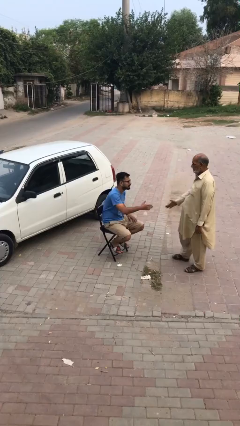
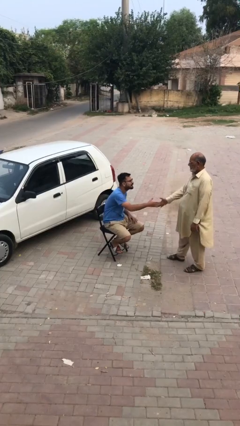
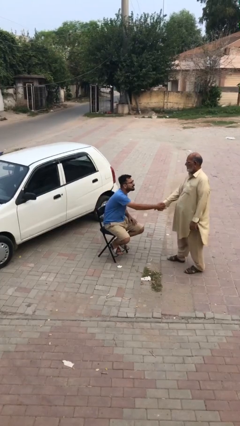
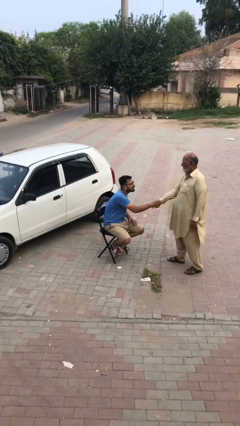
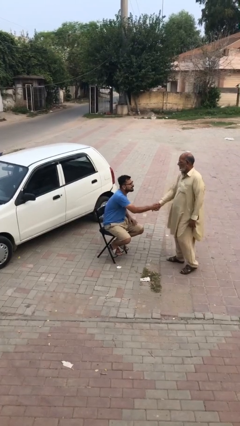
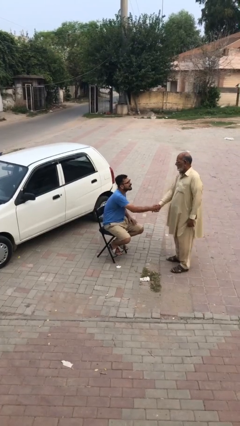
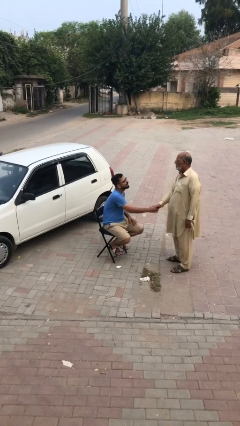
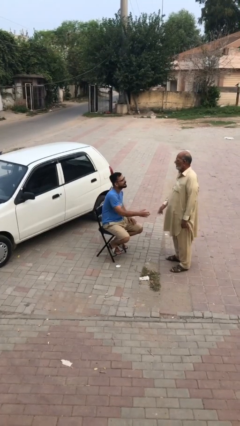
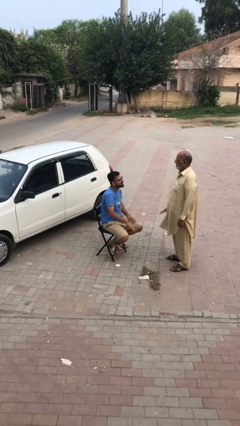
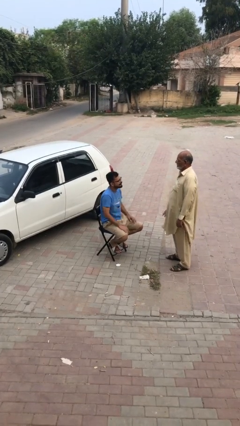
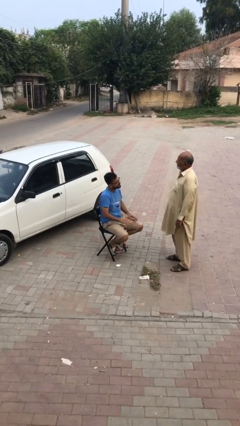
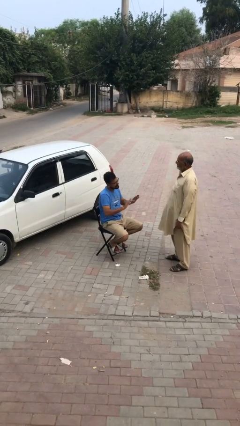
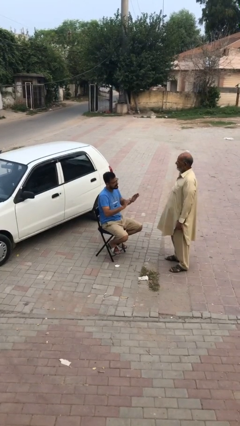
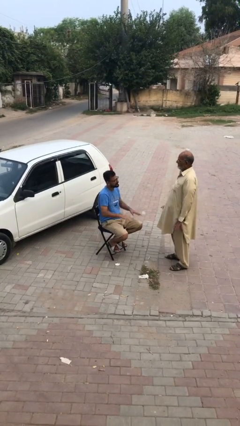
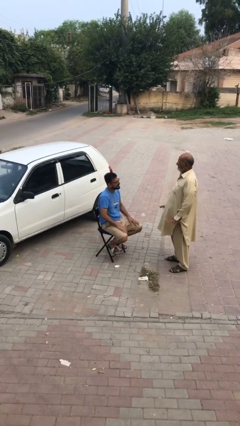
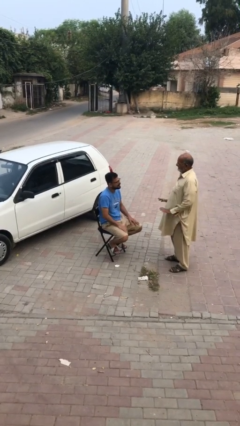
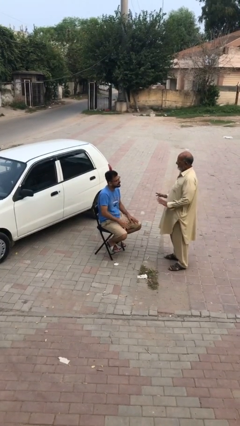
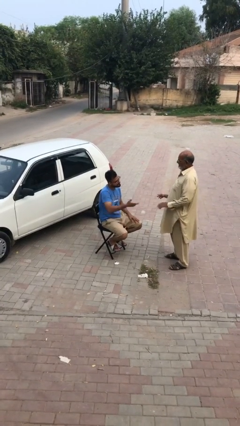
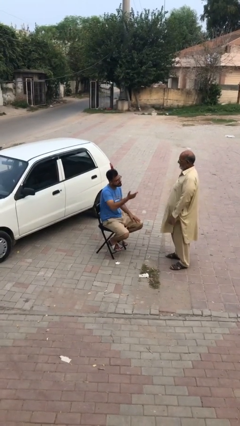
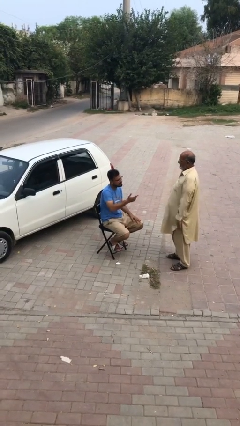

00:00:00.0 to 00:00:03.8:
person shakes hand

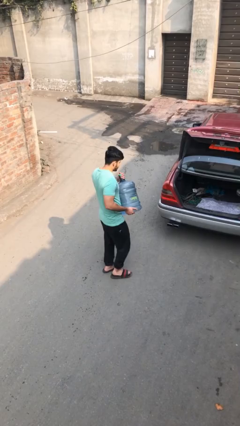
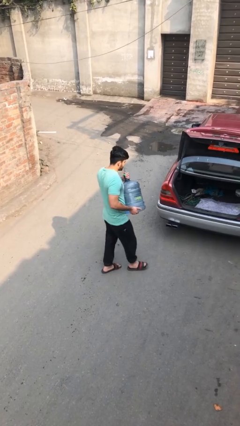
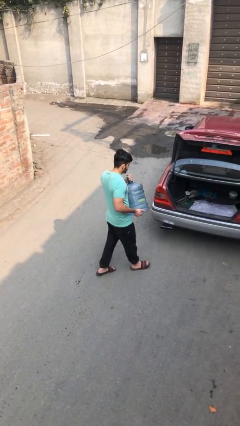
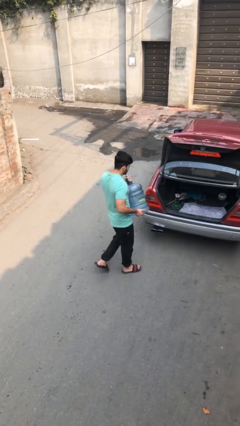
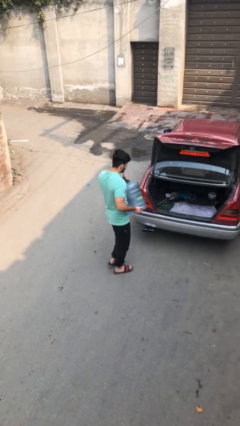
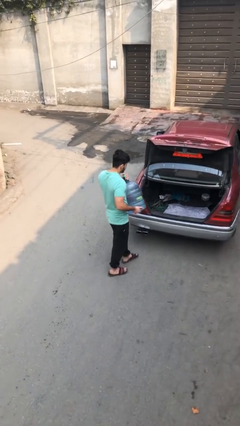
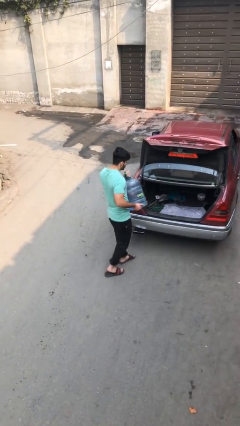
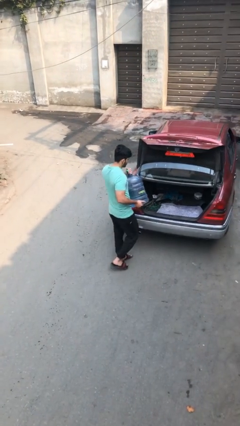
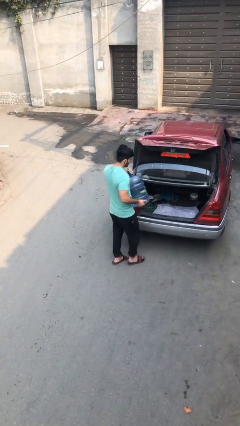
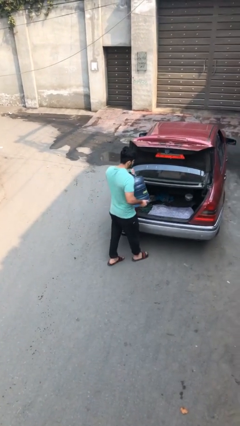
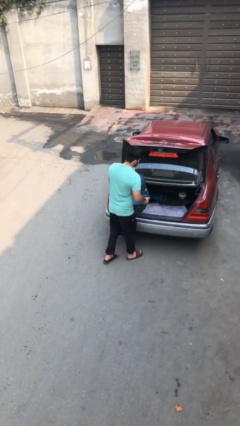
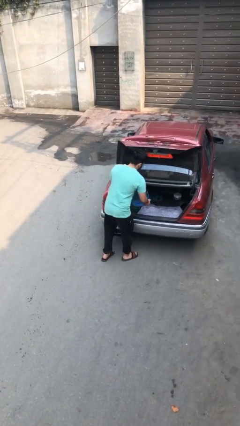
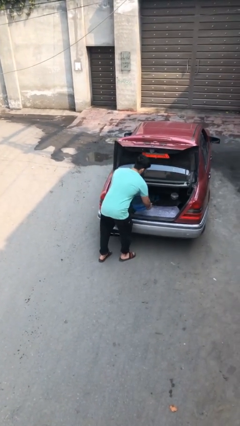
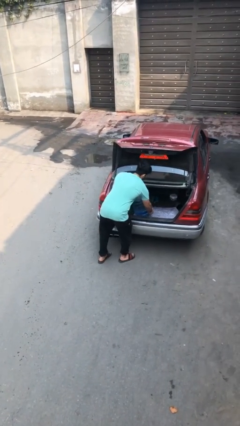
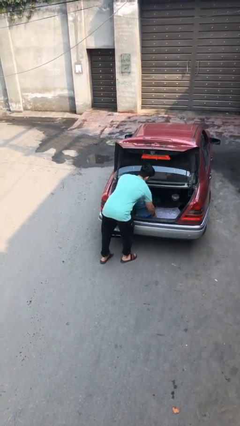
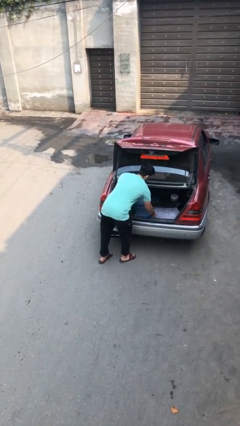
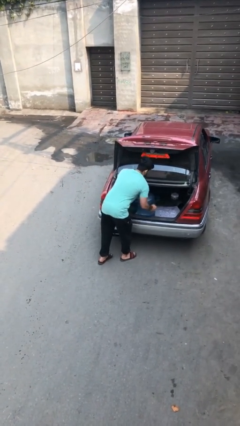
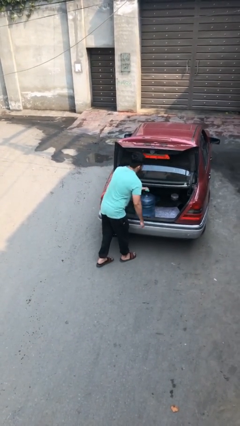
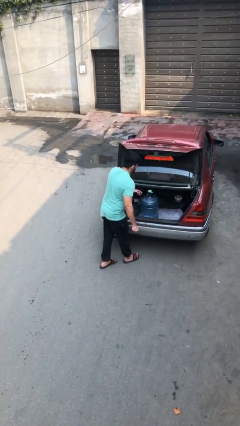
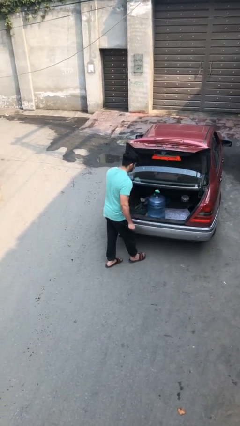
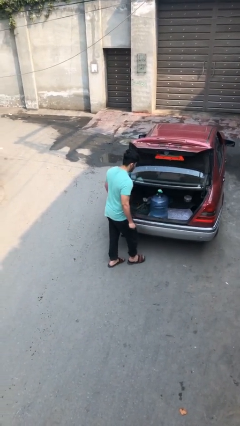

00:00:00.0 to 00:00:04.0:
person loads car

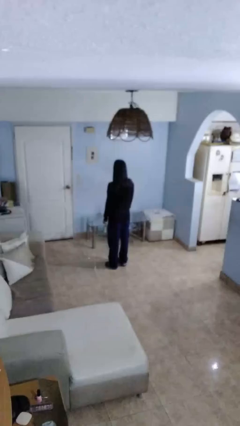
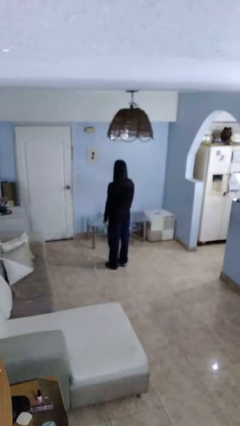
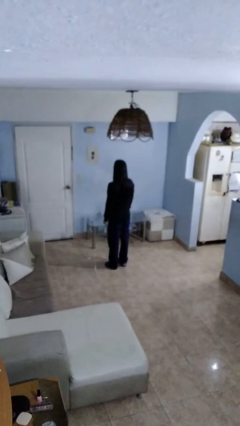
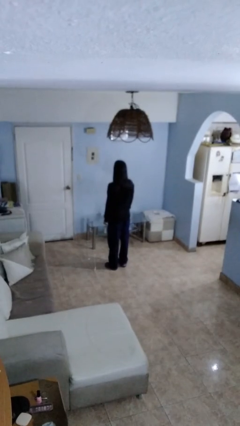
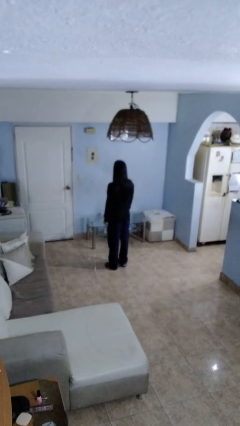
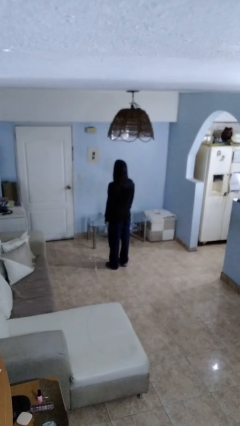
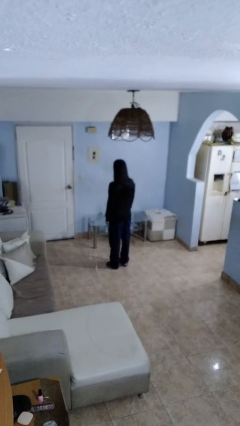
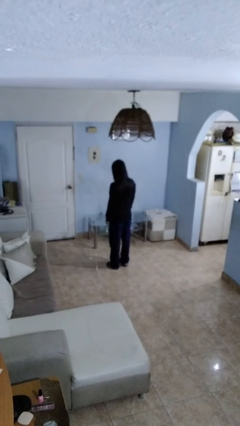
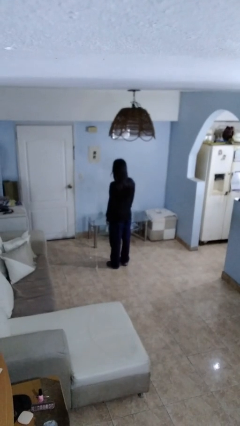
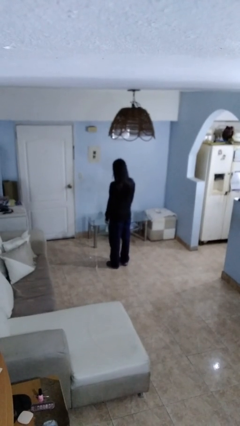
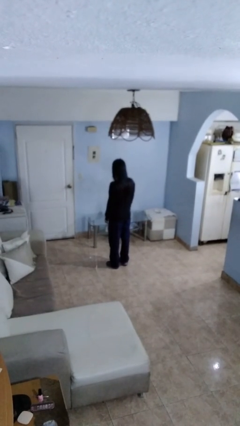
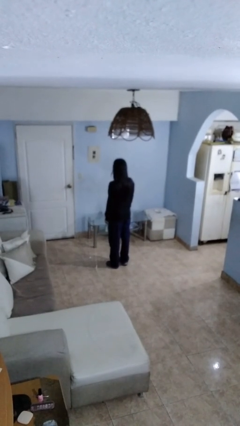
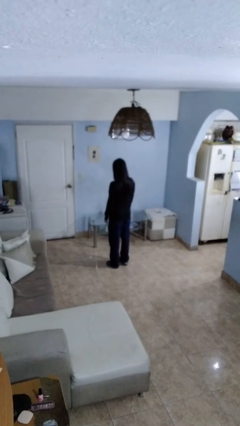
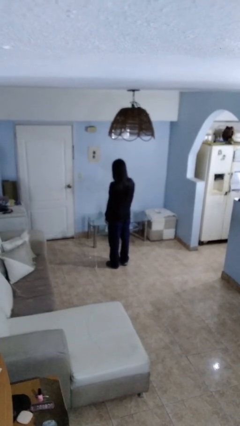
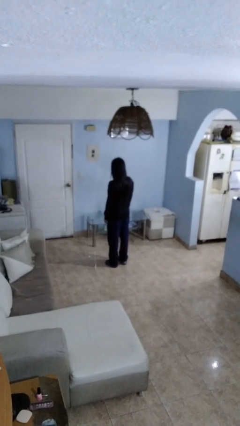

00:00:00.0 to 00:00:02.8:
person nods head

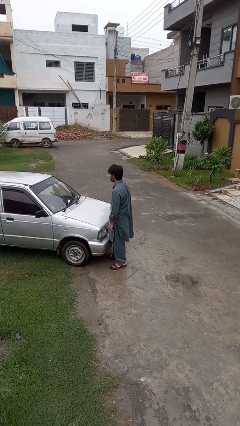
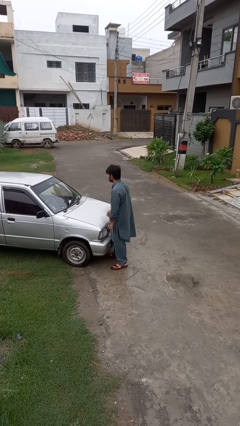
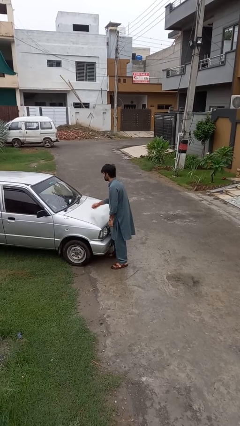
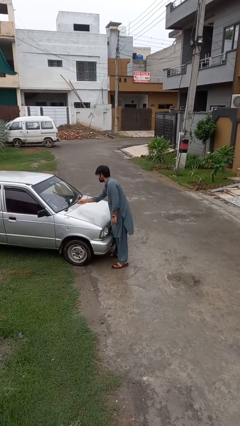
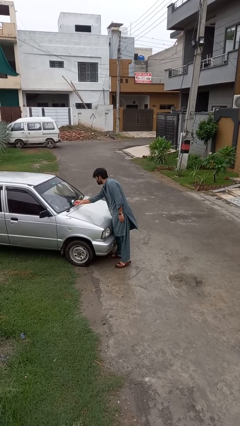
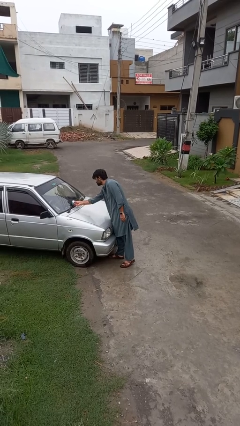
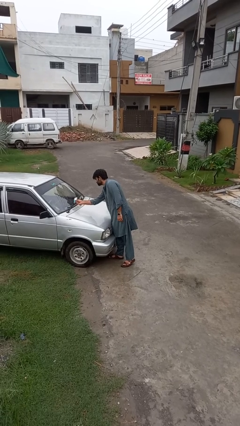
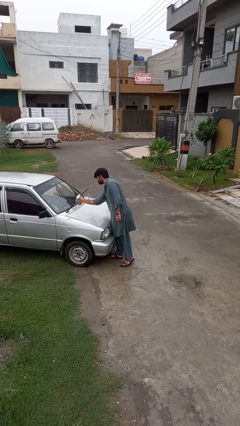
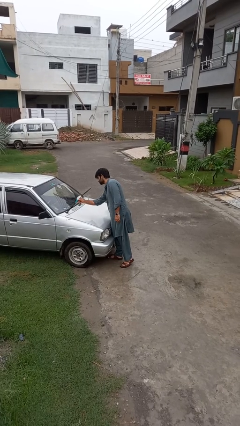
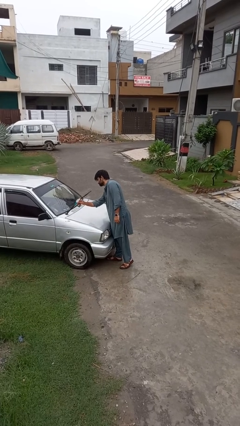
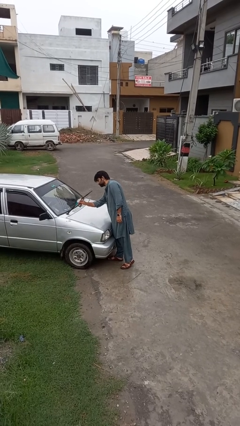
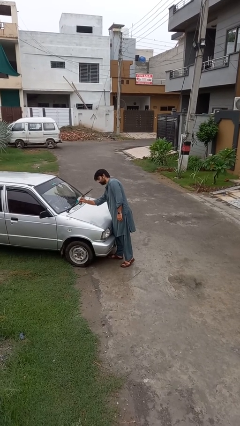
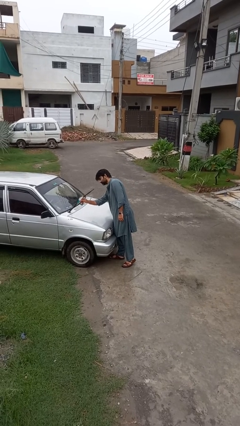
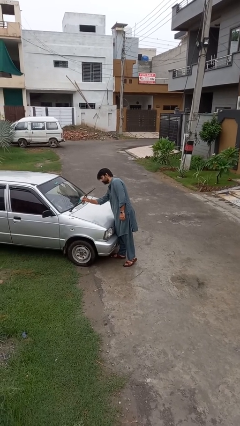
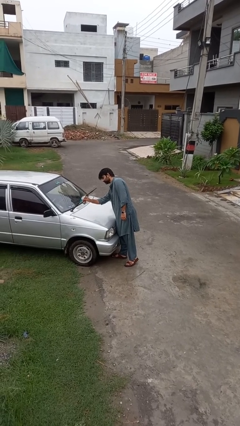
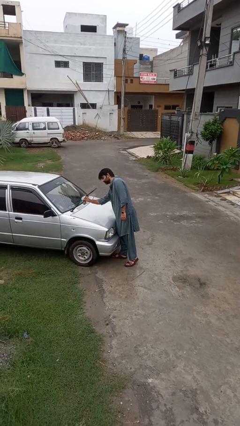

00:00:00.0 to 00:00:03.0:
person flips up car wipers

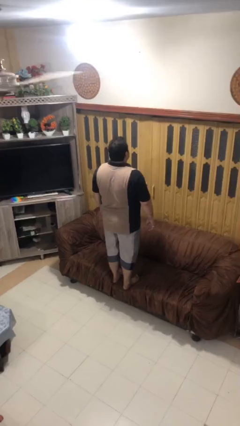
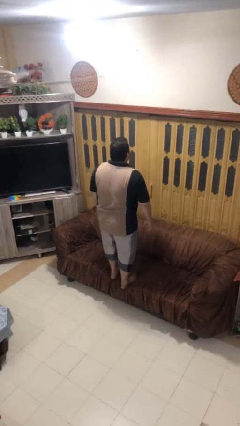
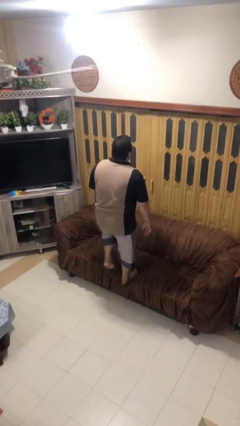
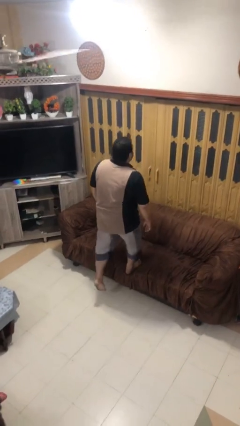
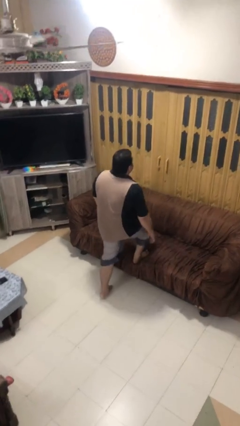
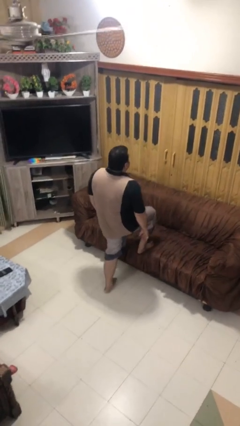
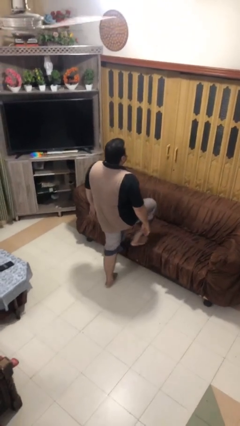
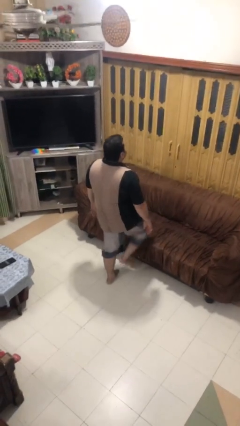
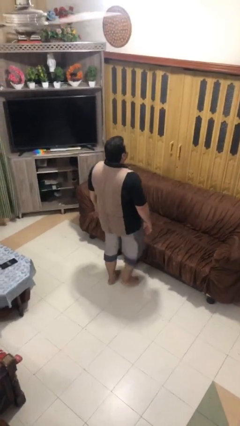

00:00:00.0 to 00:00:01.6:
person climbs off couch

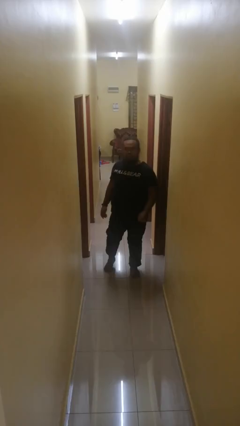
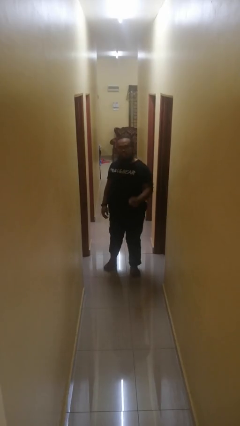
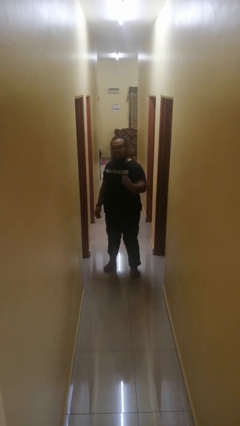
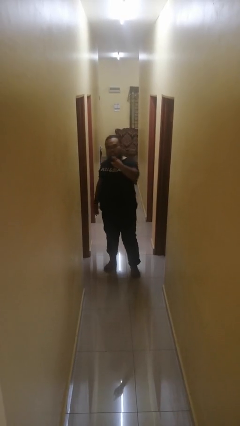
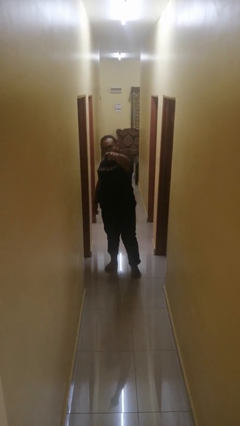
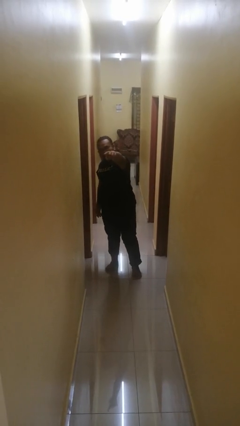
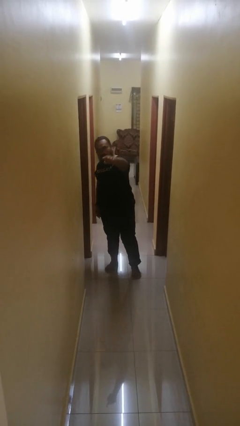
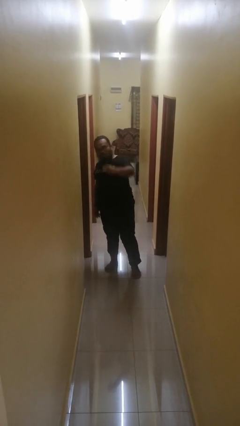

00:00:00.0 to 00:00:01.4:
person points at person

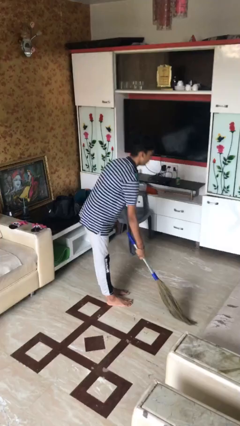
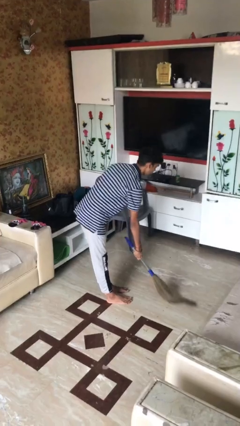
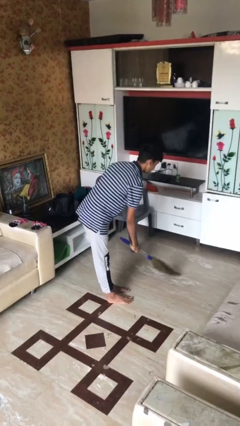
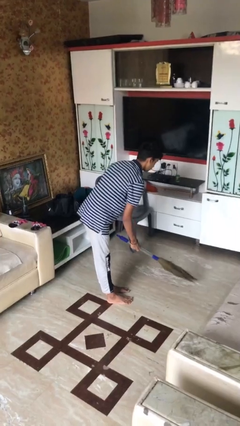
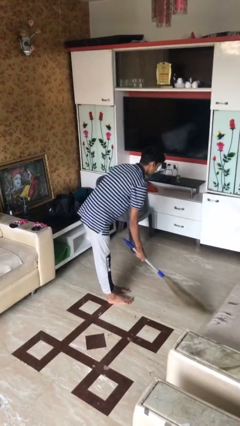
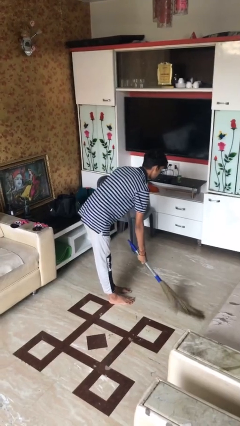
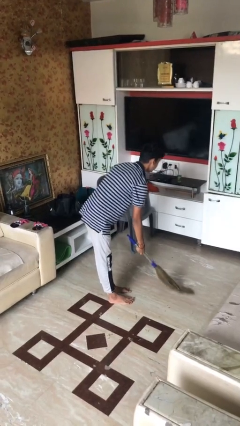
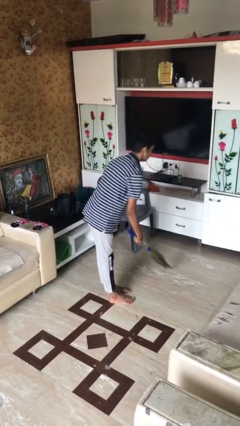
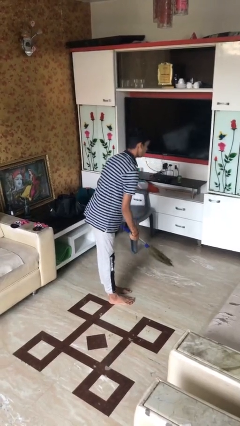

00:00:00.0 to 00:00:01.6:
person sweeps floor
